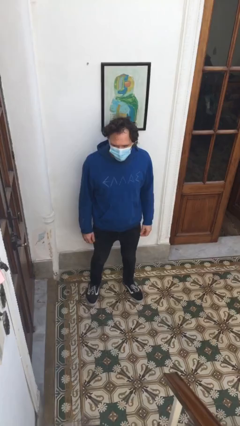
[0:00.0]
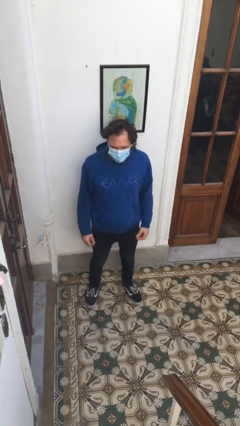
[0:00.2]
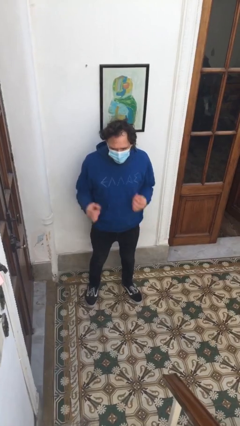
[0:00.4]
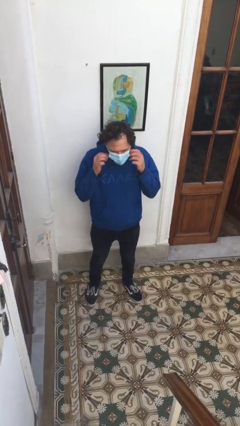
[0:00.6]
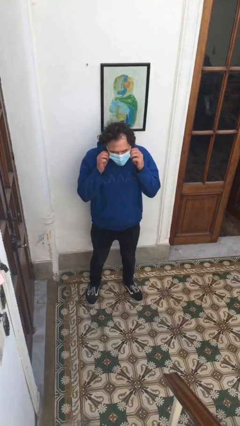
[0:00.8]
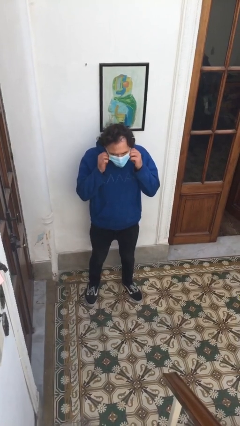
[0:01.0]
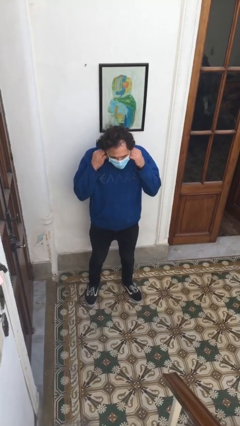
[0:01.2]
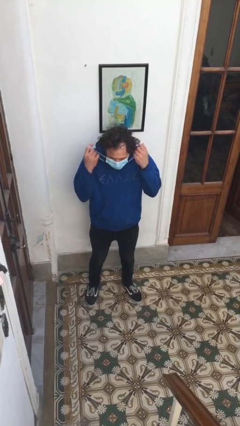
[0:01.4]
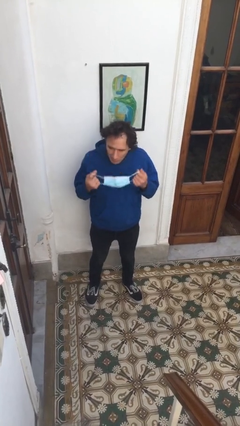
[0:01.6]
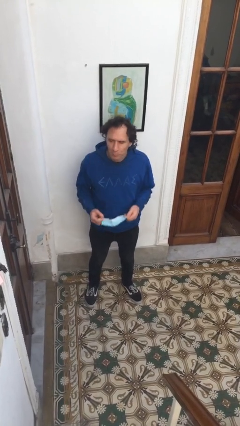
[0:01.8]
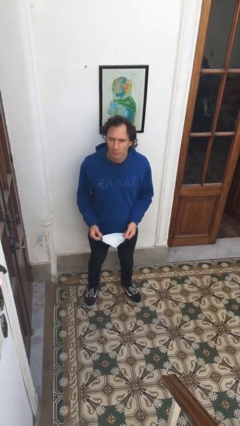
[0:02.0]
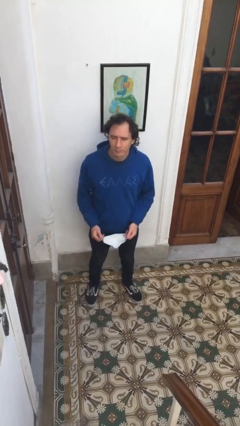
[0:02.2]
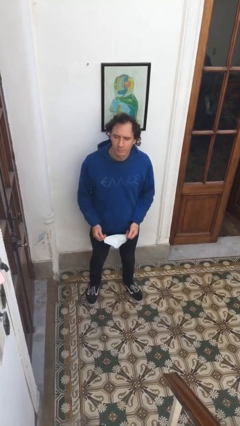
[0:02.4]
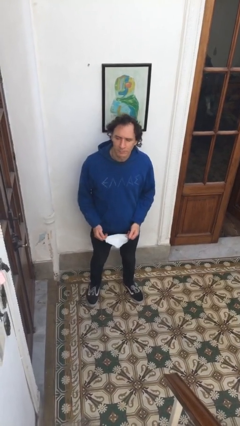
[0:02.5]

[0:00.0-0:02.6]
person takes off facemask

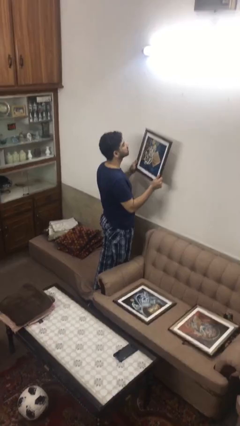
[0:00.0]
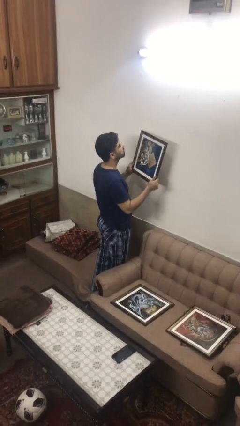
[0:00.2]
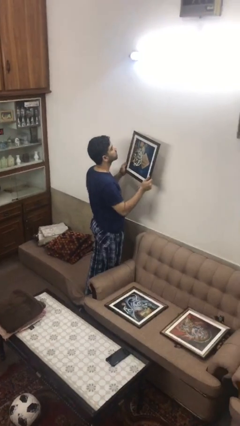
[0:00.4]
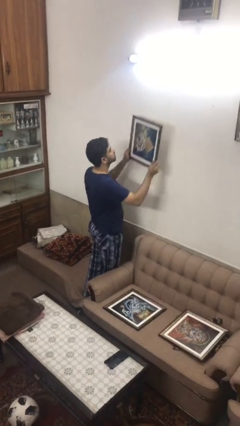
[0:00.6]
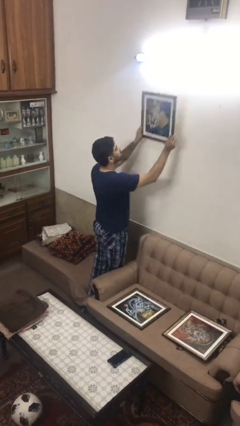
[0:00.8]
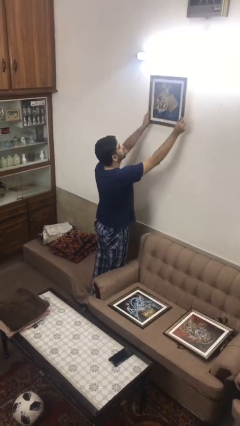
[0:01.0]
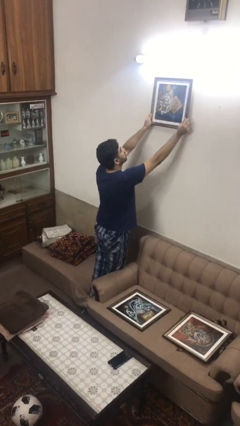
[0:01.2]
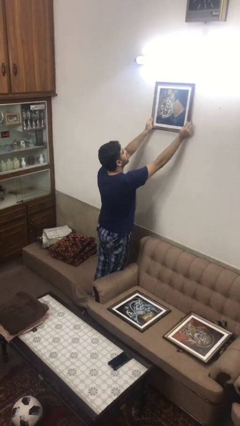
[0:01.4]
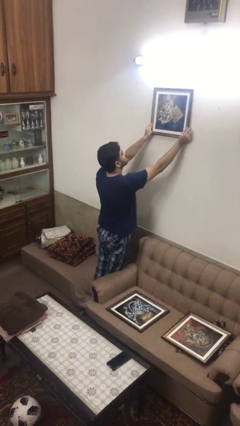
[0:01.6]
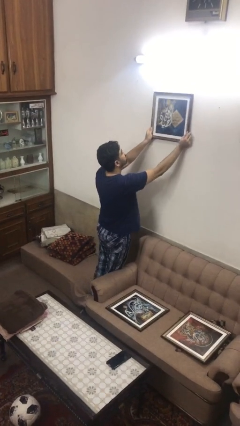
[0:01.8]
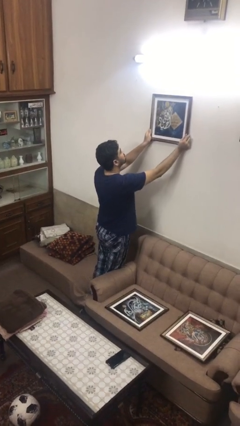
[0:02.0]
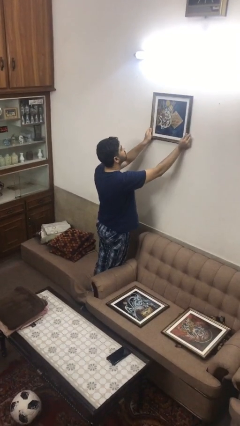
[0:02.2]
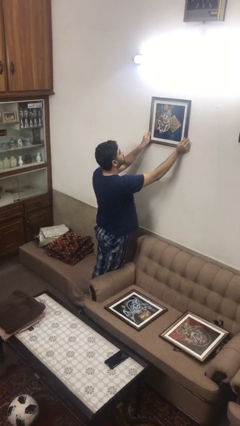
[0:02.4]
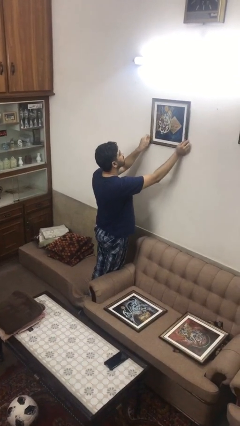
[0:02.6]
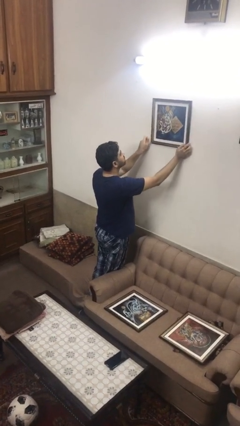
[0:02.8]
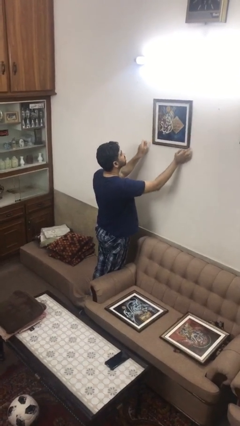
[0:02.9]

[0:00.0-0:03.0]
person puts up picture frame

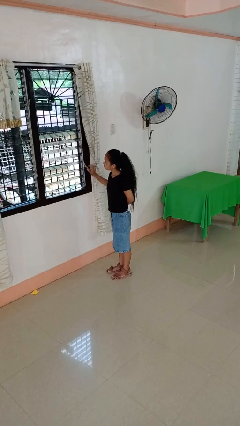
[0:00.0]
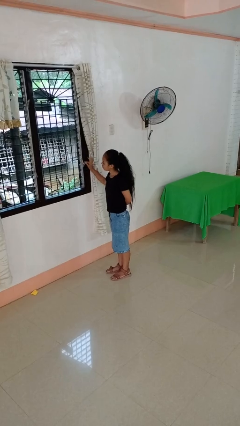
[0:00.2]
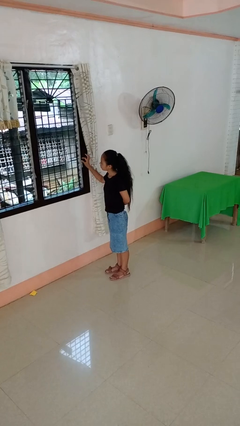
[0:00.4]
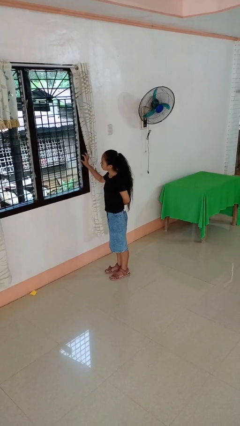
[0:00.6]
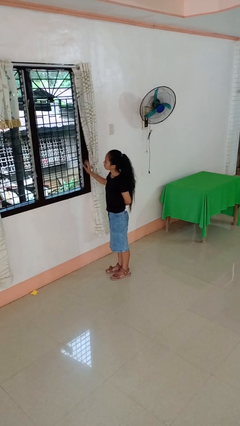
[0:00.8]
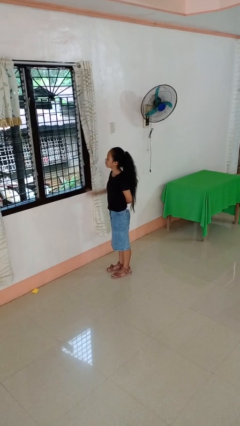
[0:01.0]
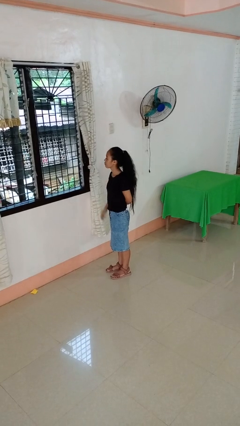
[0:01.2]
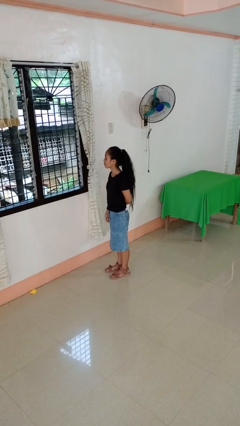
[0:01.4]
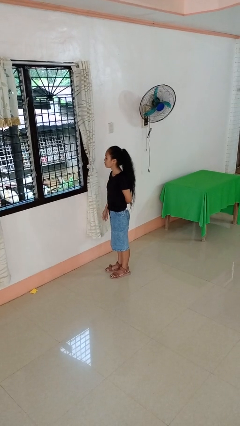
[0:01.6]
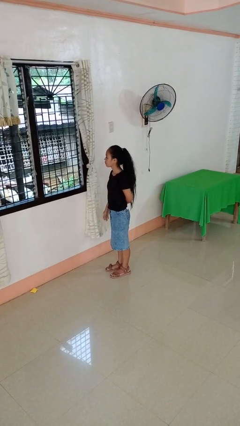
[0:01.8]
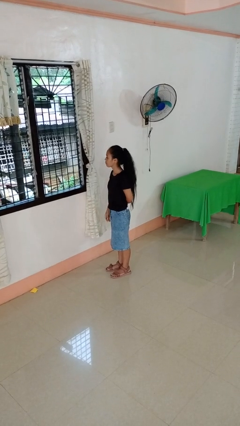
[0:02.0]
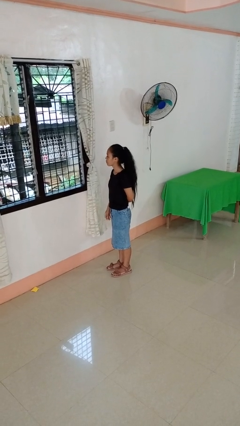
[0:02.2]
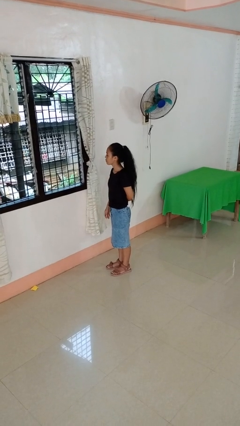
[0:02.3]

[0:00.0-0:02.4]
person closes home window

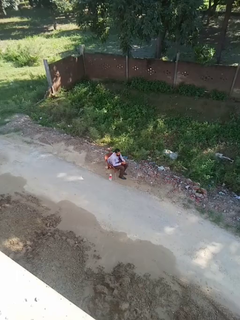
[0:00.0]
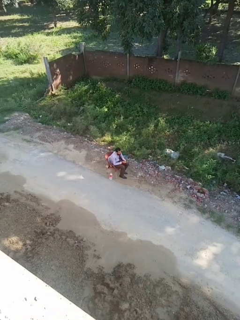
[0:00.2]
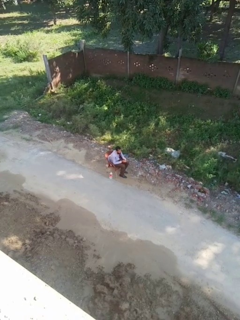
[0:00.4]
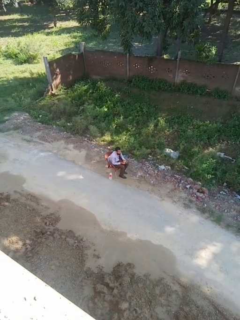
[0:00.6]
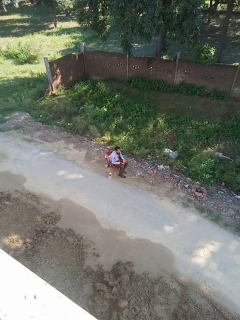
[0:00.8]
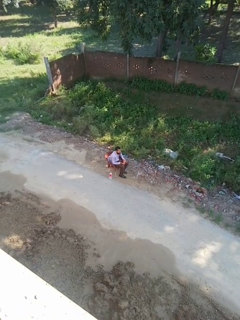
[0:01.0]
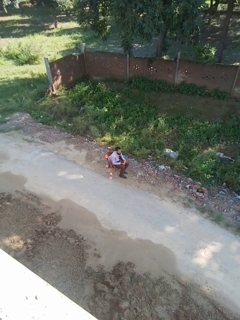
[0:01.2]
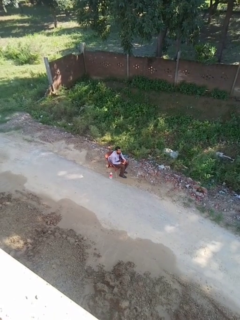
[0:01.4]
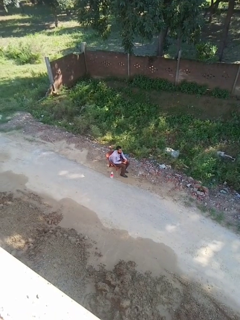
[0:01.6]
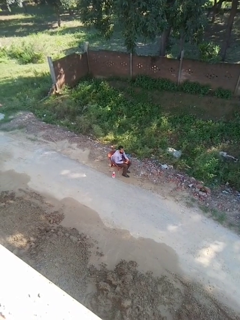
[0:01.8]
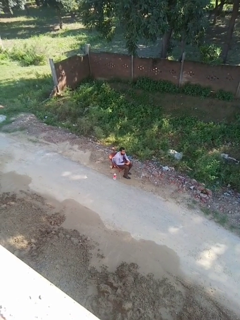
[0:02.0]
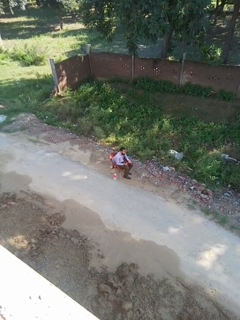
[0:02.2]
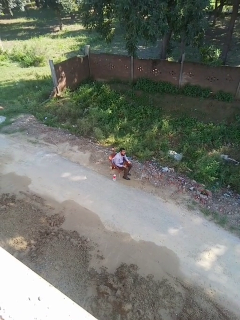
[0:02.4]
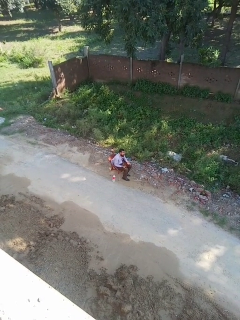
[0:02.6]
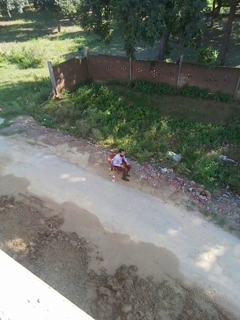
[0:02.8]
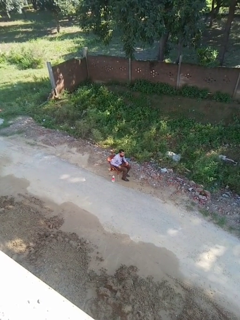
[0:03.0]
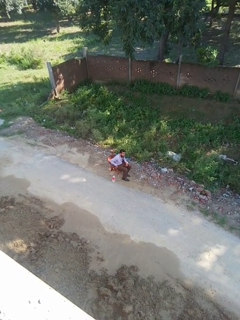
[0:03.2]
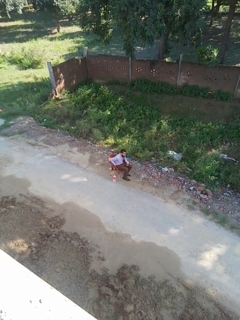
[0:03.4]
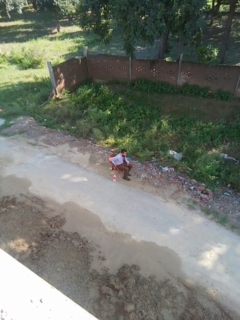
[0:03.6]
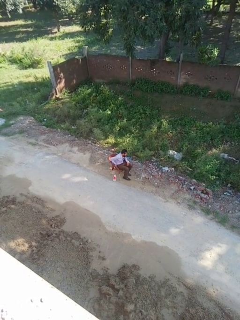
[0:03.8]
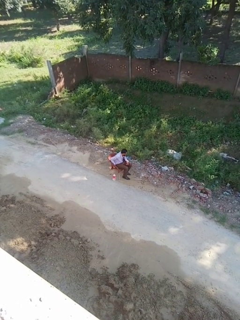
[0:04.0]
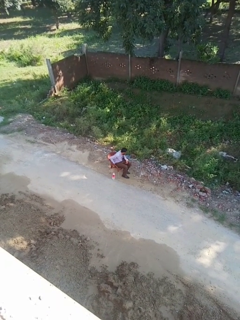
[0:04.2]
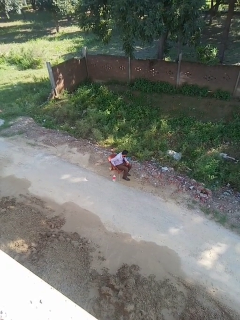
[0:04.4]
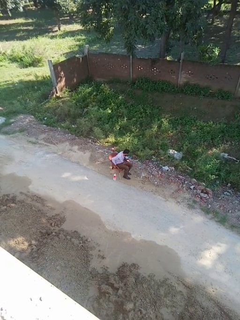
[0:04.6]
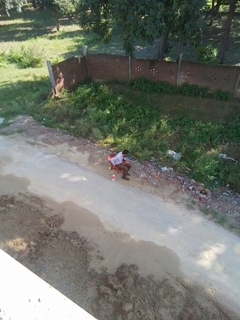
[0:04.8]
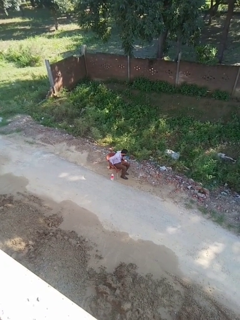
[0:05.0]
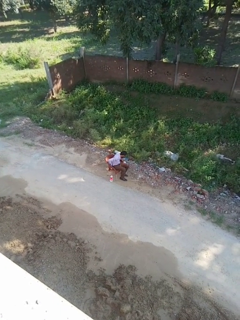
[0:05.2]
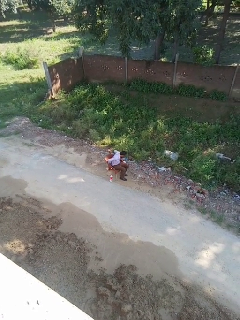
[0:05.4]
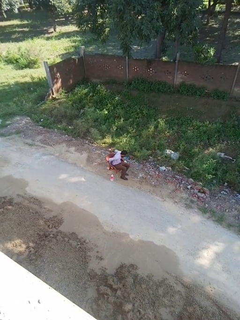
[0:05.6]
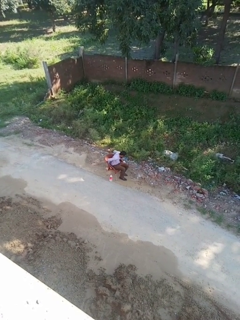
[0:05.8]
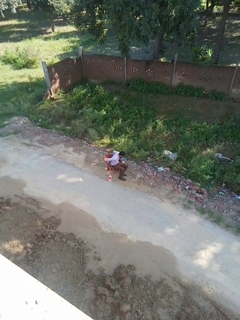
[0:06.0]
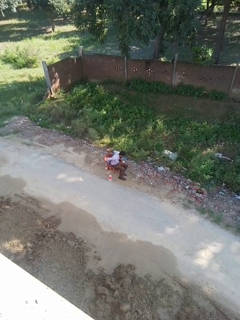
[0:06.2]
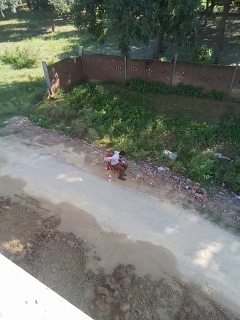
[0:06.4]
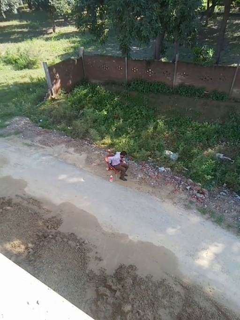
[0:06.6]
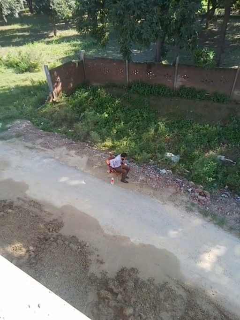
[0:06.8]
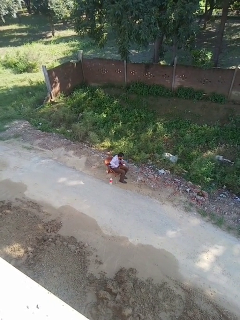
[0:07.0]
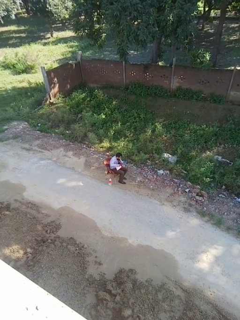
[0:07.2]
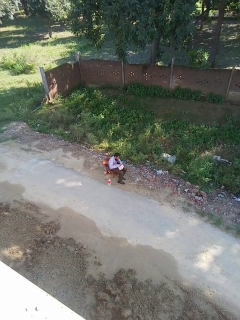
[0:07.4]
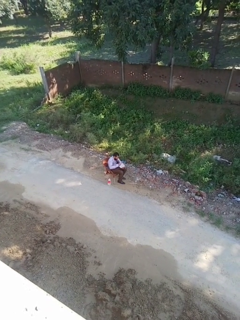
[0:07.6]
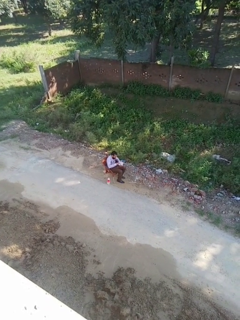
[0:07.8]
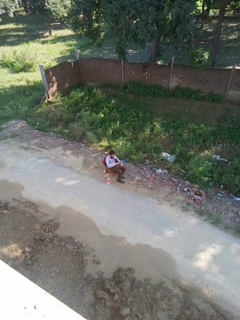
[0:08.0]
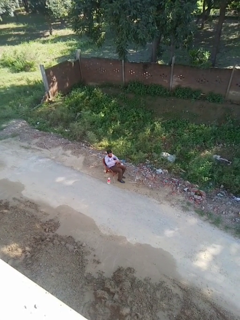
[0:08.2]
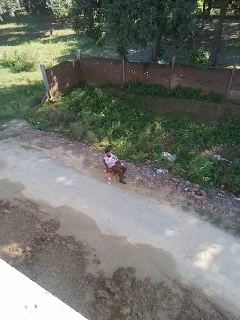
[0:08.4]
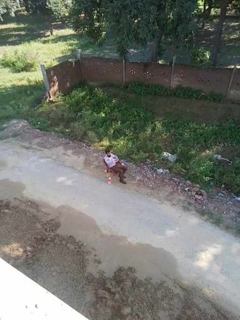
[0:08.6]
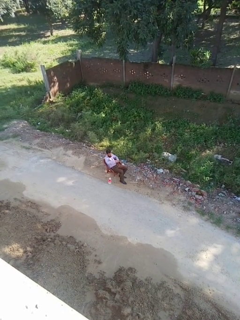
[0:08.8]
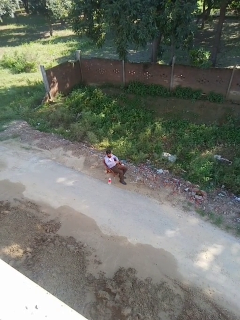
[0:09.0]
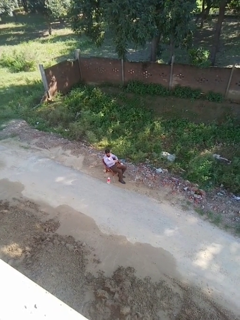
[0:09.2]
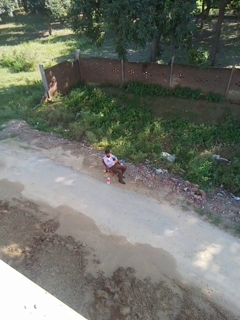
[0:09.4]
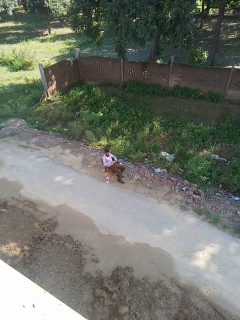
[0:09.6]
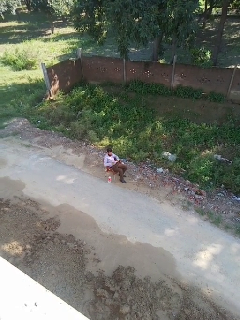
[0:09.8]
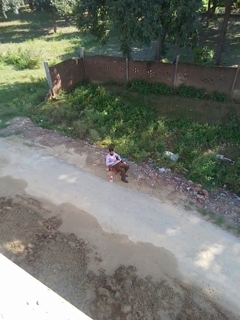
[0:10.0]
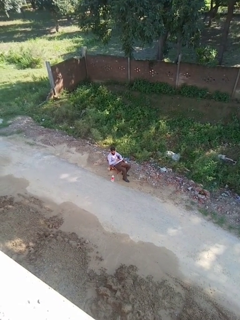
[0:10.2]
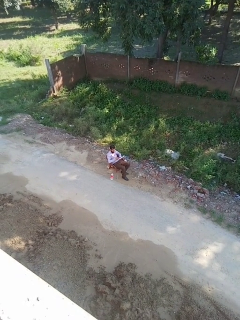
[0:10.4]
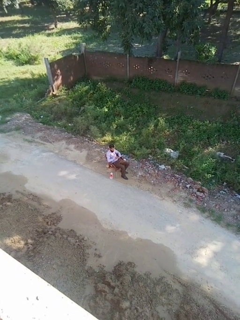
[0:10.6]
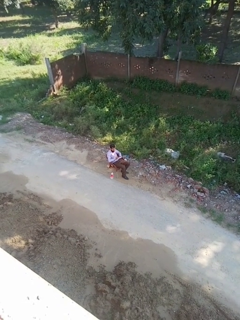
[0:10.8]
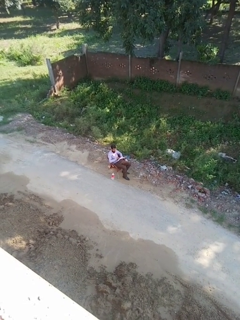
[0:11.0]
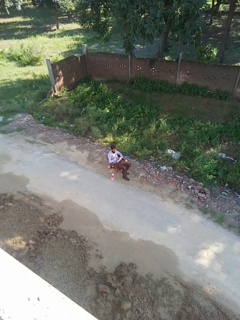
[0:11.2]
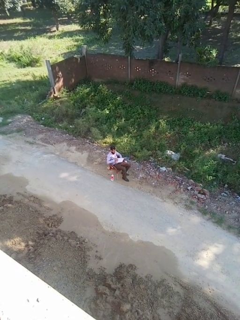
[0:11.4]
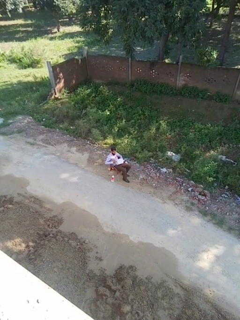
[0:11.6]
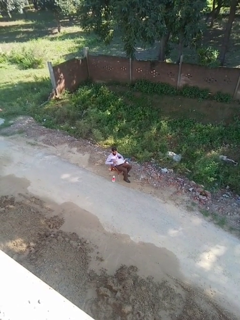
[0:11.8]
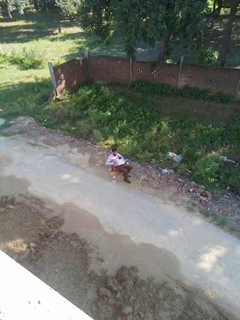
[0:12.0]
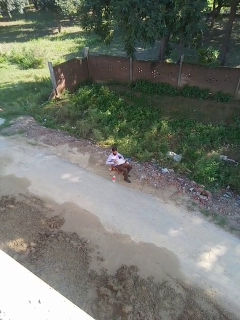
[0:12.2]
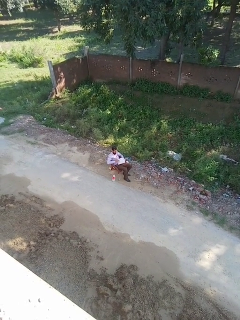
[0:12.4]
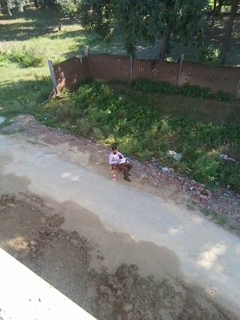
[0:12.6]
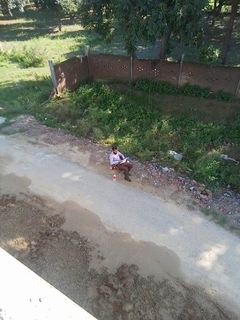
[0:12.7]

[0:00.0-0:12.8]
person reads magazine
